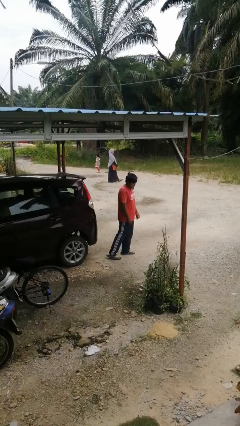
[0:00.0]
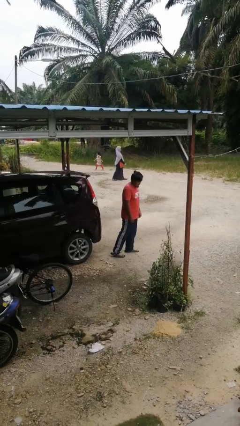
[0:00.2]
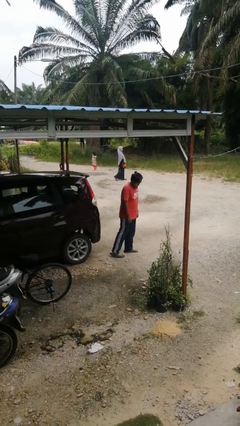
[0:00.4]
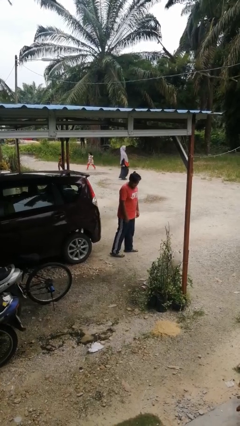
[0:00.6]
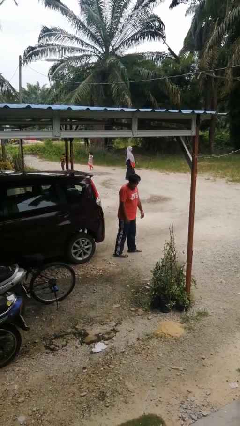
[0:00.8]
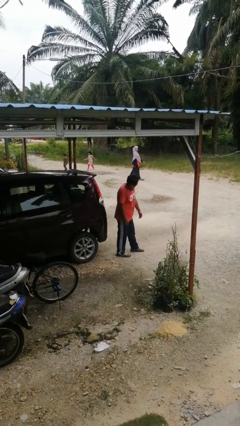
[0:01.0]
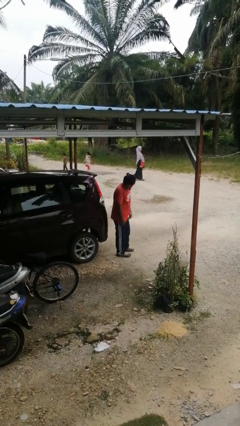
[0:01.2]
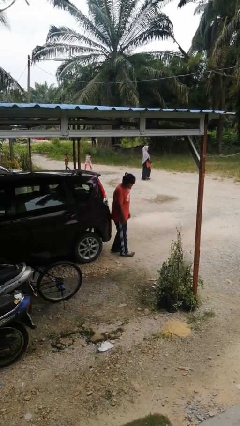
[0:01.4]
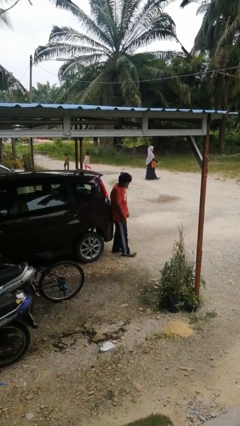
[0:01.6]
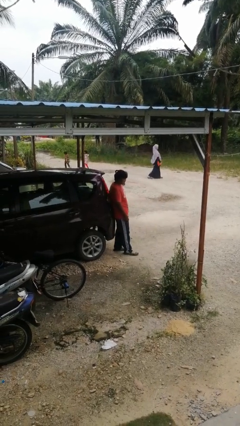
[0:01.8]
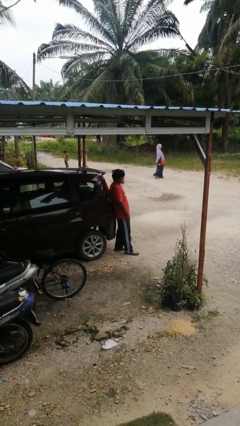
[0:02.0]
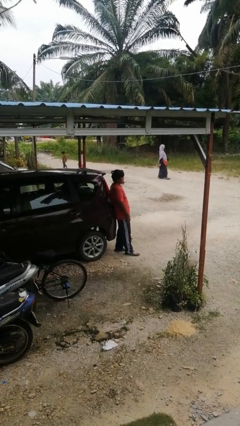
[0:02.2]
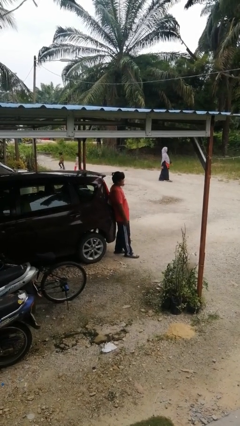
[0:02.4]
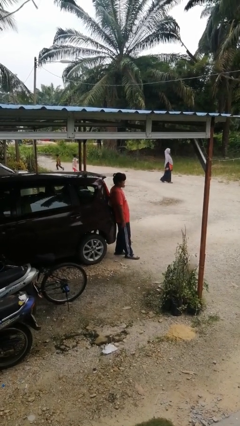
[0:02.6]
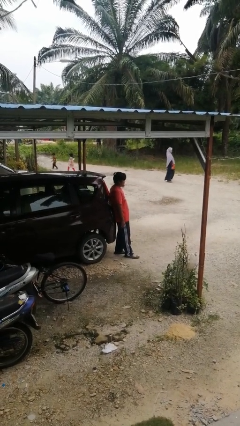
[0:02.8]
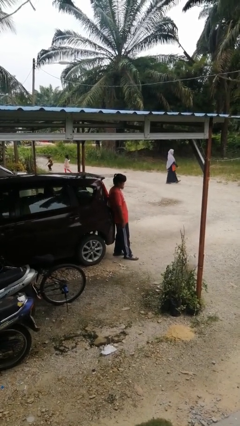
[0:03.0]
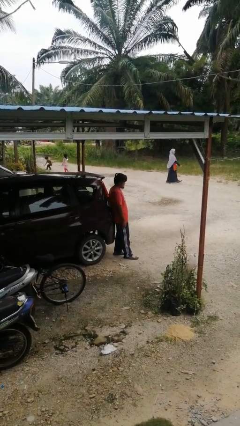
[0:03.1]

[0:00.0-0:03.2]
person leans against car

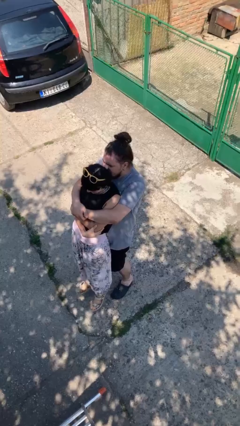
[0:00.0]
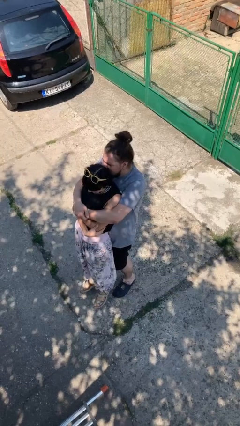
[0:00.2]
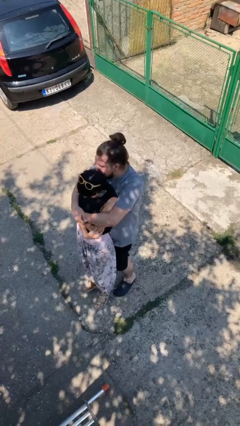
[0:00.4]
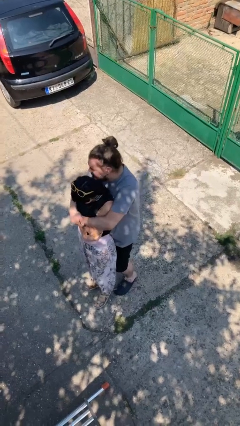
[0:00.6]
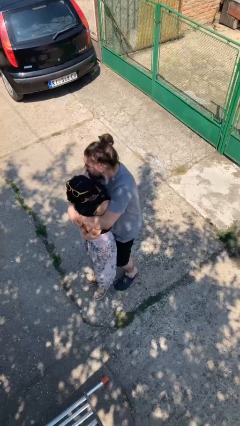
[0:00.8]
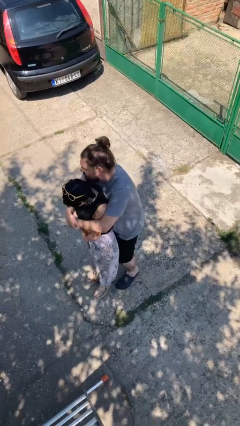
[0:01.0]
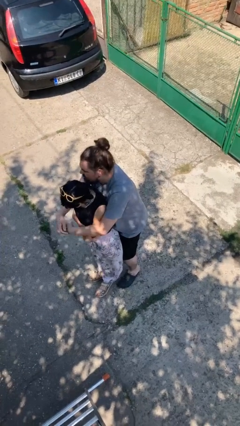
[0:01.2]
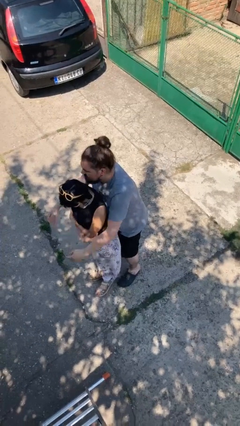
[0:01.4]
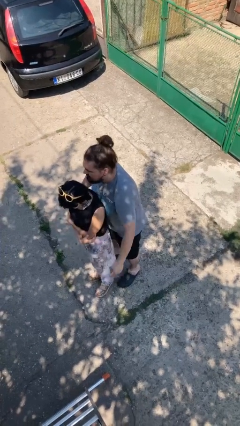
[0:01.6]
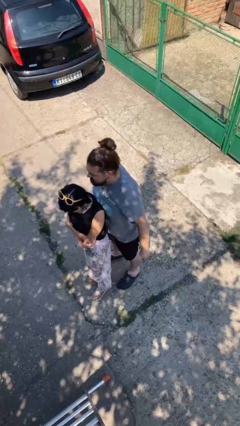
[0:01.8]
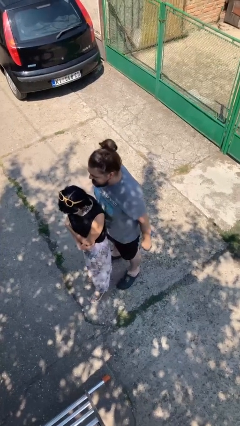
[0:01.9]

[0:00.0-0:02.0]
person puts down person

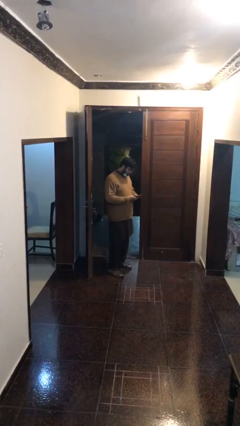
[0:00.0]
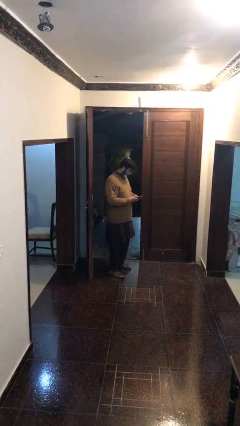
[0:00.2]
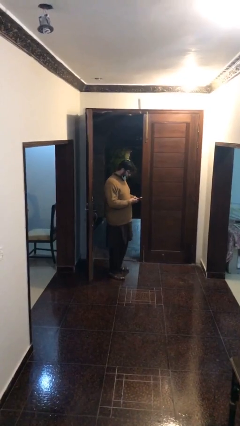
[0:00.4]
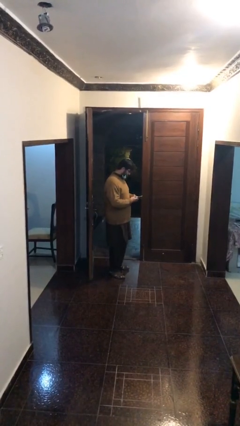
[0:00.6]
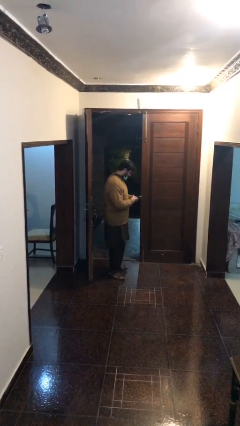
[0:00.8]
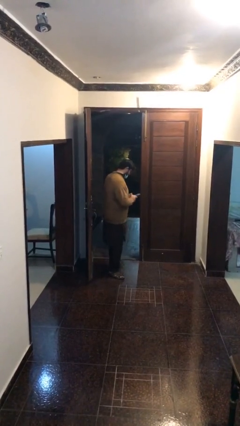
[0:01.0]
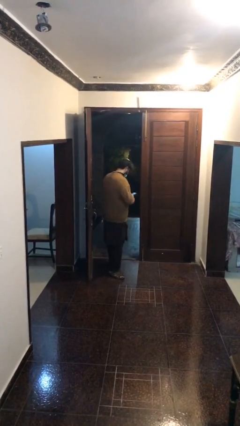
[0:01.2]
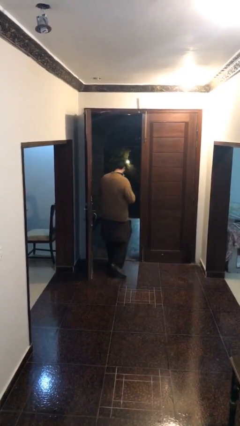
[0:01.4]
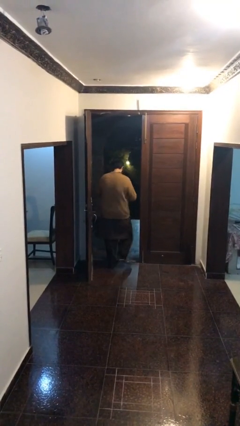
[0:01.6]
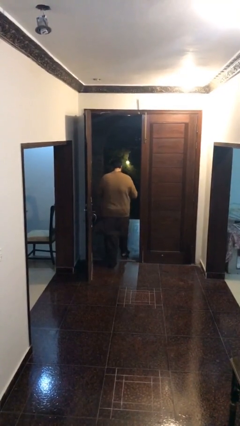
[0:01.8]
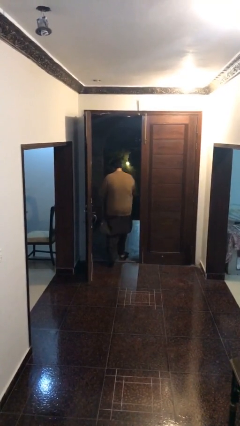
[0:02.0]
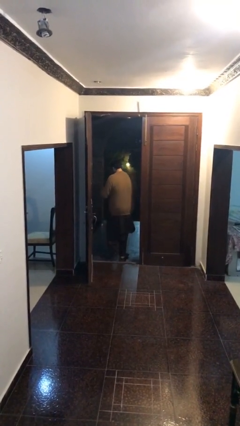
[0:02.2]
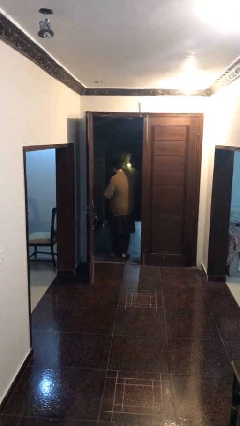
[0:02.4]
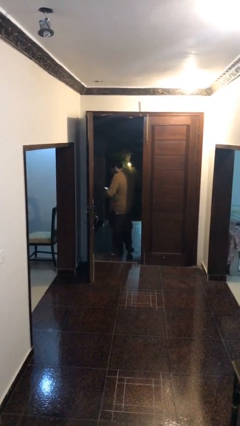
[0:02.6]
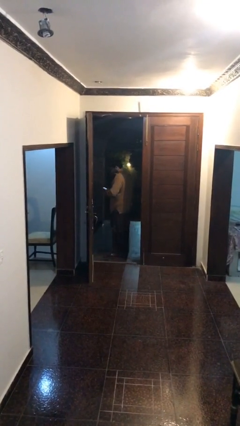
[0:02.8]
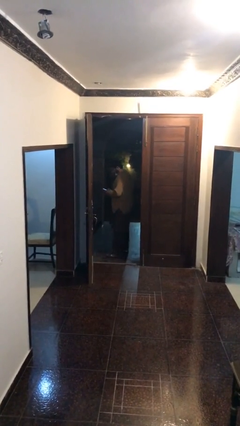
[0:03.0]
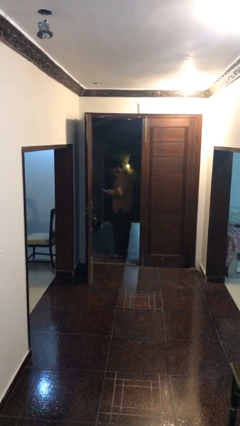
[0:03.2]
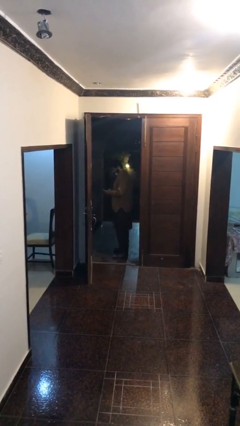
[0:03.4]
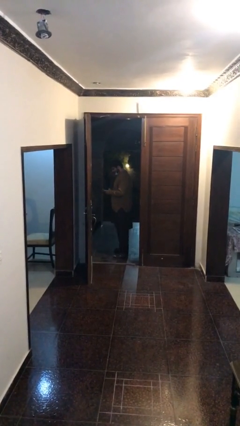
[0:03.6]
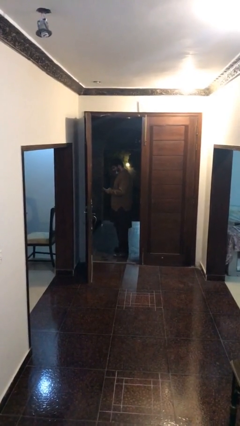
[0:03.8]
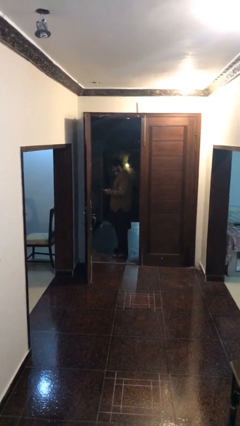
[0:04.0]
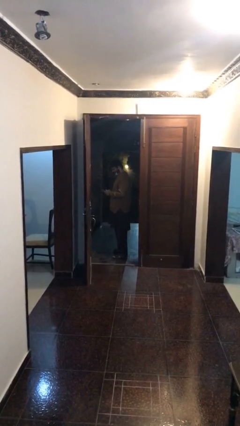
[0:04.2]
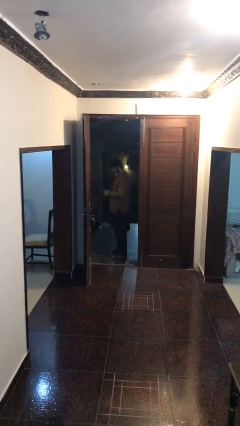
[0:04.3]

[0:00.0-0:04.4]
person exits scene through structure

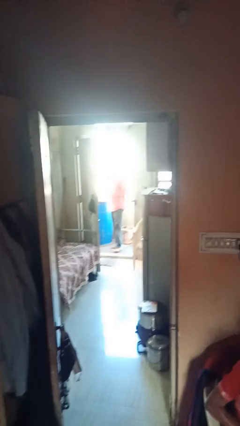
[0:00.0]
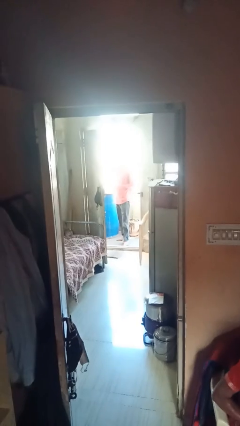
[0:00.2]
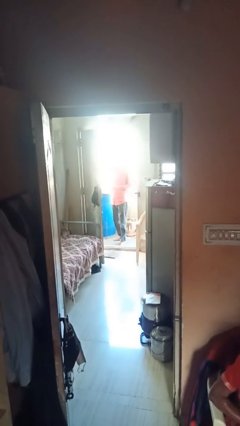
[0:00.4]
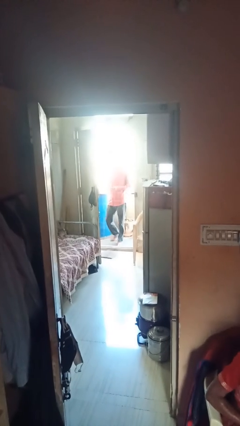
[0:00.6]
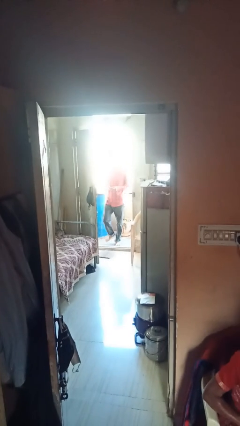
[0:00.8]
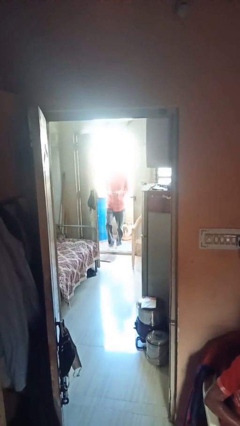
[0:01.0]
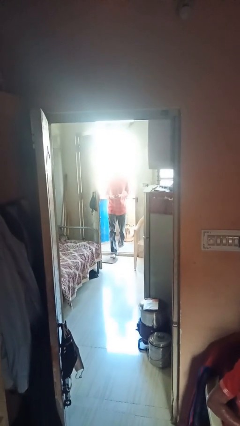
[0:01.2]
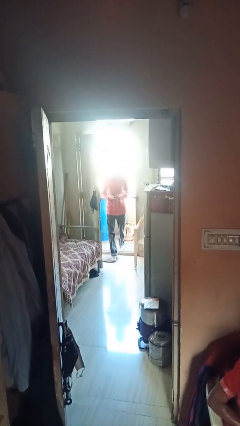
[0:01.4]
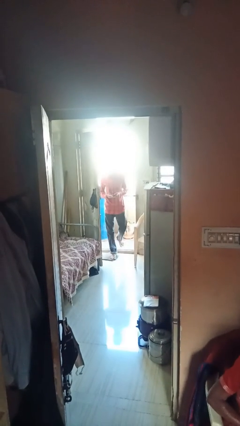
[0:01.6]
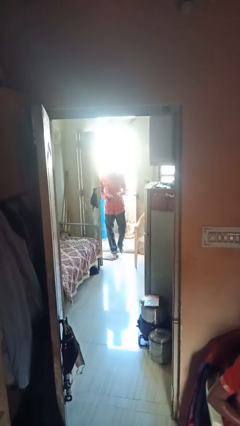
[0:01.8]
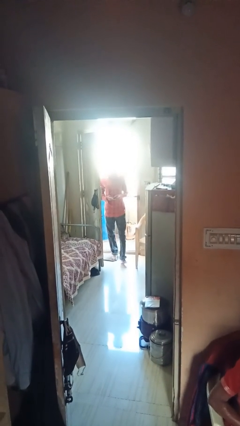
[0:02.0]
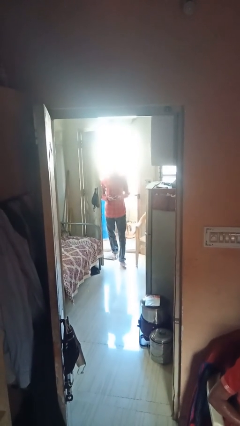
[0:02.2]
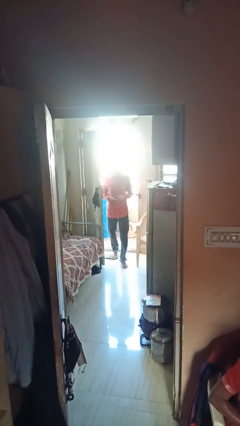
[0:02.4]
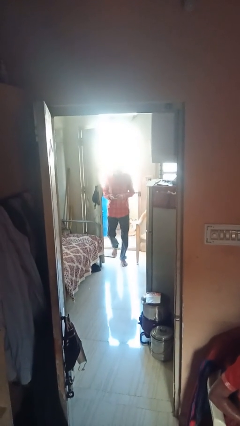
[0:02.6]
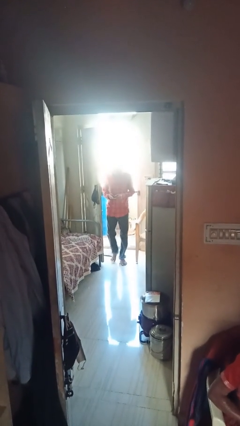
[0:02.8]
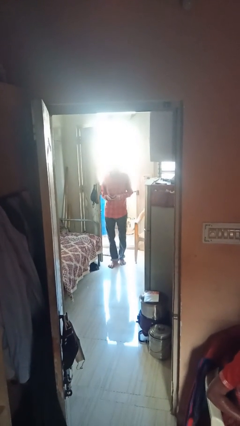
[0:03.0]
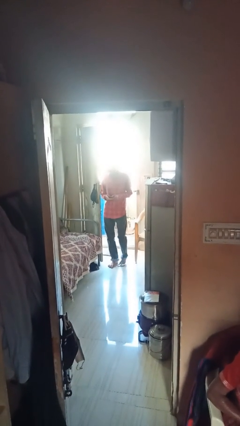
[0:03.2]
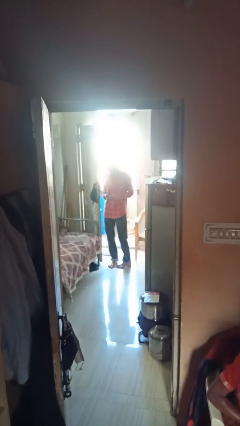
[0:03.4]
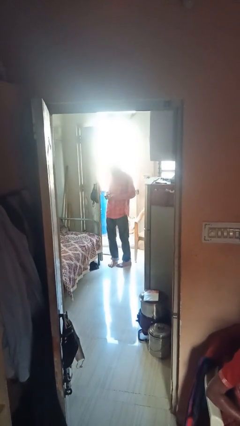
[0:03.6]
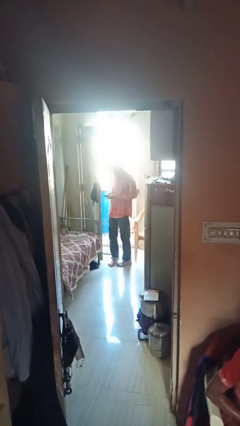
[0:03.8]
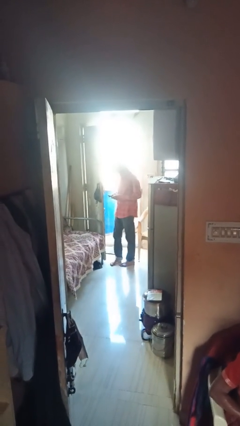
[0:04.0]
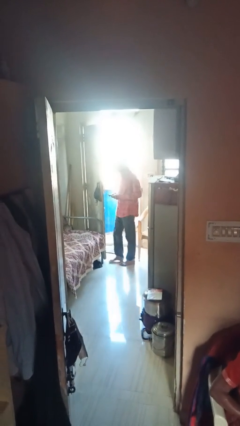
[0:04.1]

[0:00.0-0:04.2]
person enters scene through structure

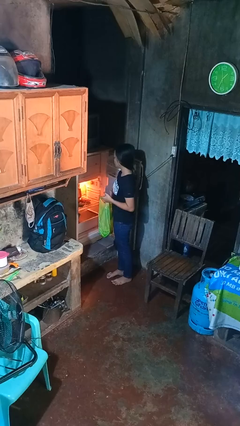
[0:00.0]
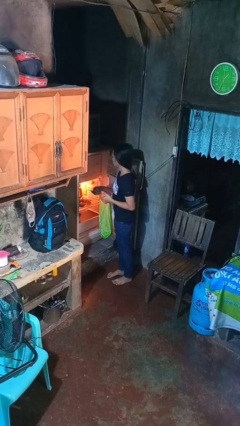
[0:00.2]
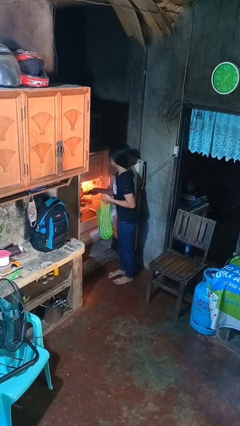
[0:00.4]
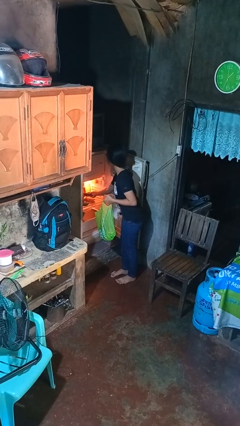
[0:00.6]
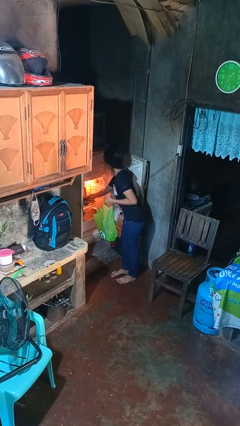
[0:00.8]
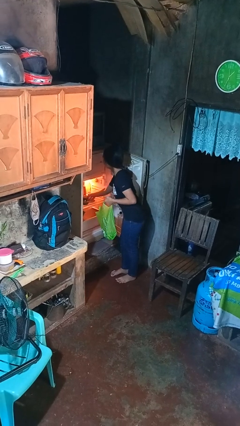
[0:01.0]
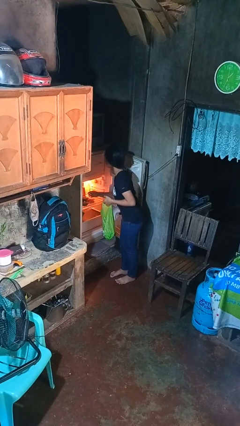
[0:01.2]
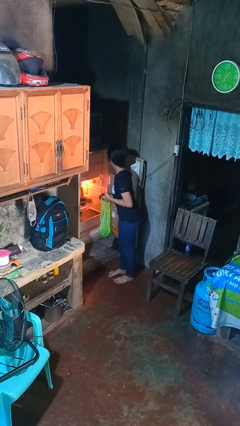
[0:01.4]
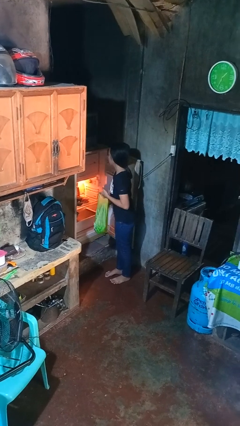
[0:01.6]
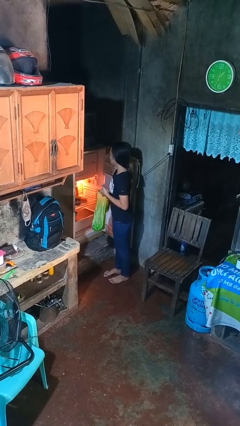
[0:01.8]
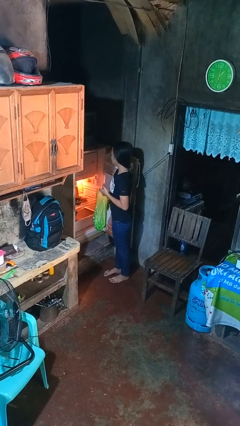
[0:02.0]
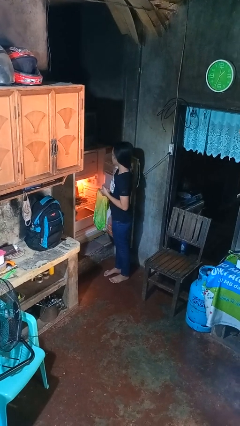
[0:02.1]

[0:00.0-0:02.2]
person loads groceries into refrigerator

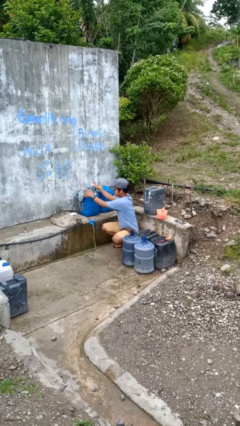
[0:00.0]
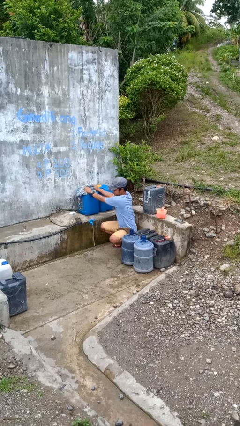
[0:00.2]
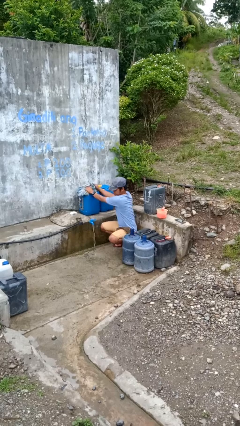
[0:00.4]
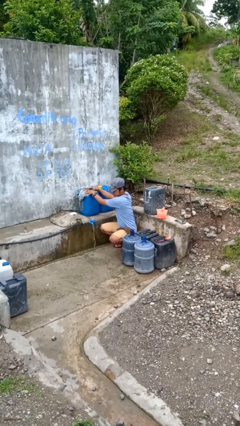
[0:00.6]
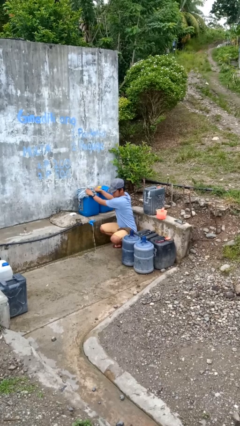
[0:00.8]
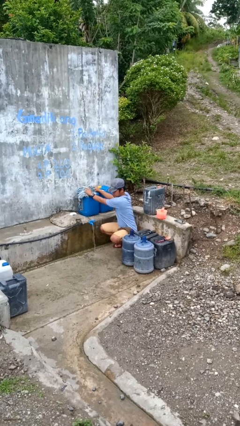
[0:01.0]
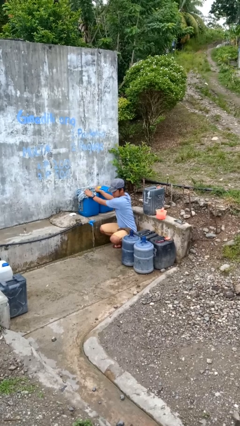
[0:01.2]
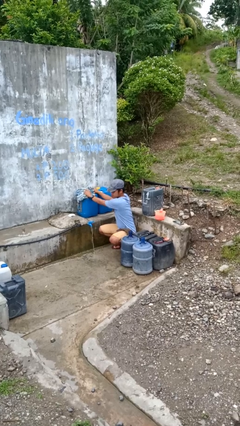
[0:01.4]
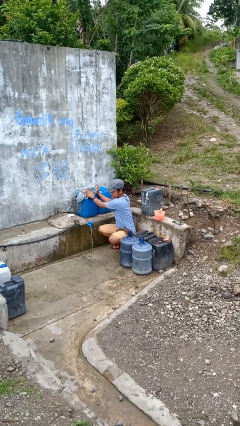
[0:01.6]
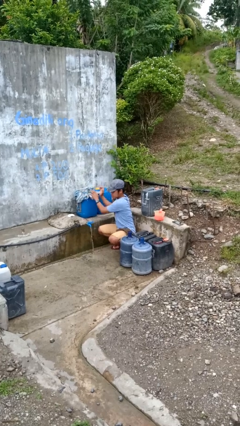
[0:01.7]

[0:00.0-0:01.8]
person dries hands with towel
